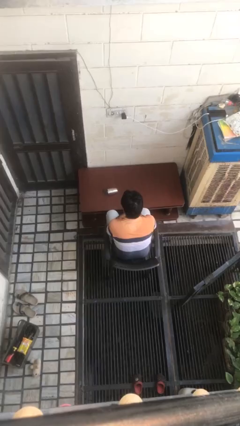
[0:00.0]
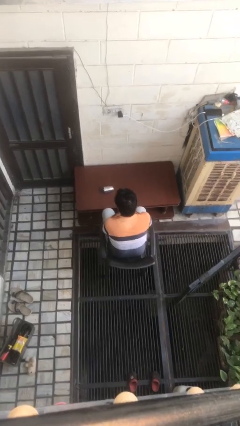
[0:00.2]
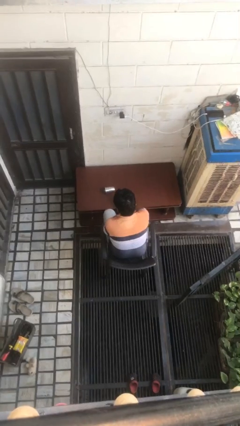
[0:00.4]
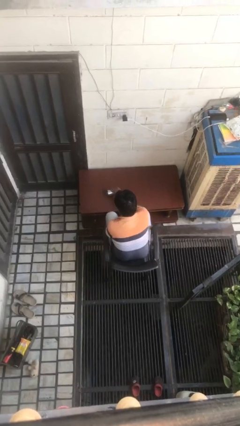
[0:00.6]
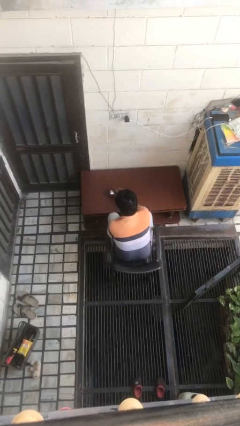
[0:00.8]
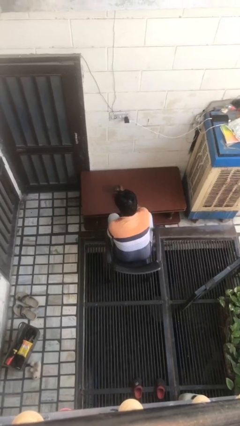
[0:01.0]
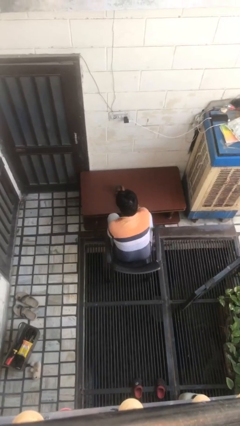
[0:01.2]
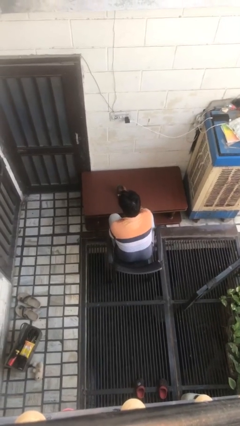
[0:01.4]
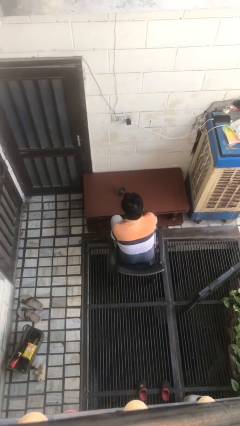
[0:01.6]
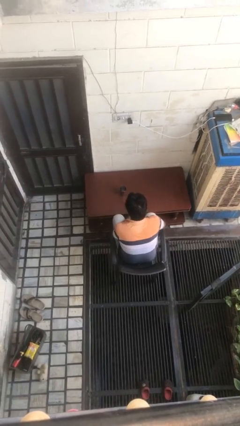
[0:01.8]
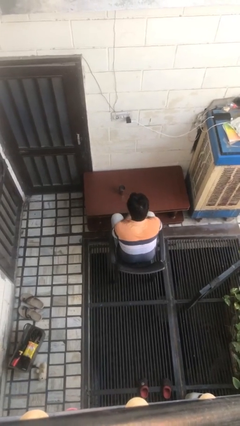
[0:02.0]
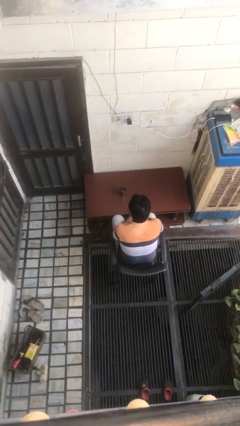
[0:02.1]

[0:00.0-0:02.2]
person sets upright glass

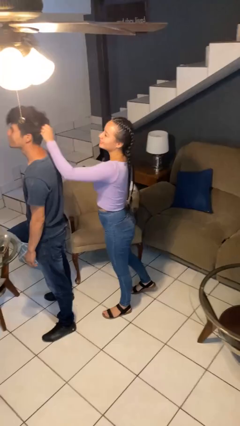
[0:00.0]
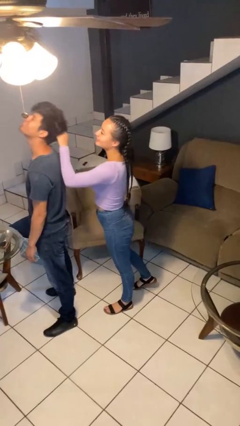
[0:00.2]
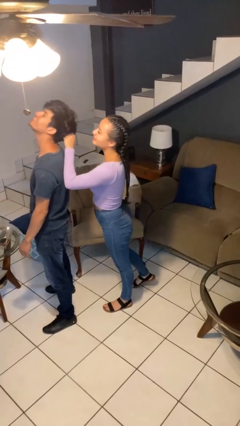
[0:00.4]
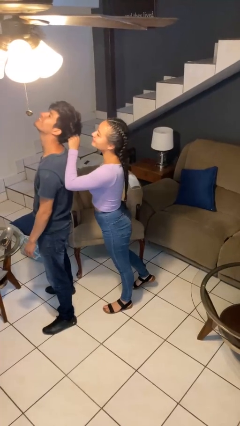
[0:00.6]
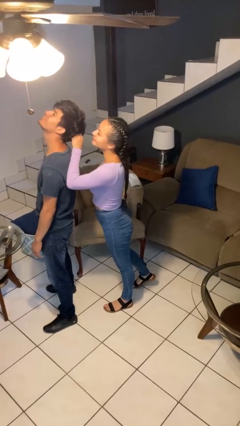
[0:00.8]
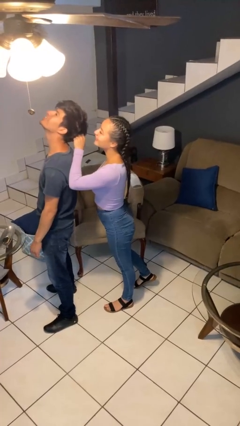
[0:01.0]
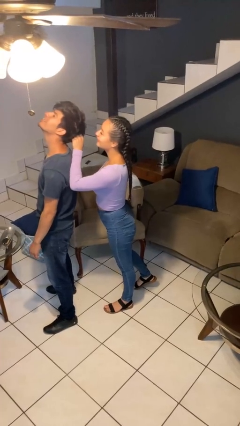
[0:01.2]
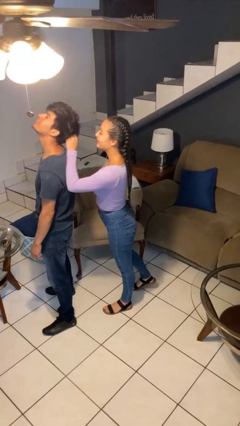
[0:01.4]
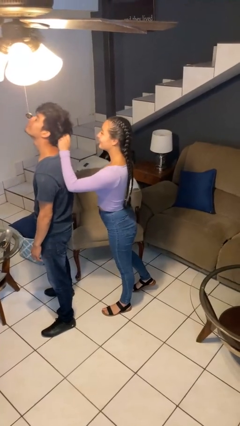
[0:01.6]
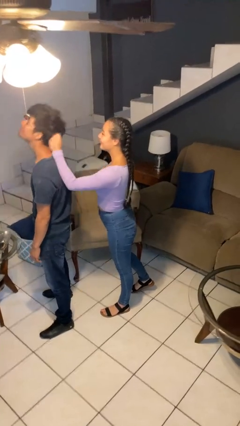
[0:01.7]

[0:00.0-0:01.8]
person grabs person by hair

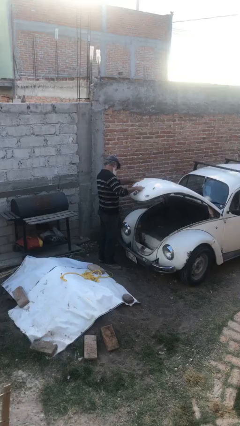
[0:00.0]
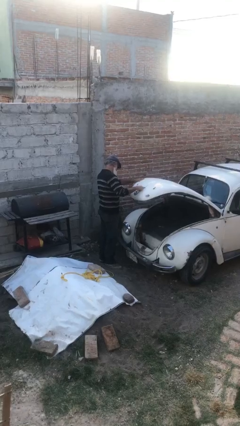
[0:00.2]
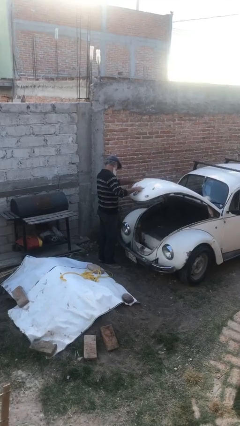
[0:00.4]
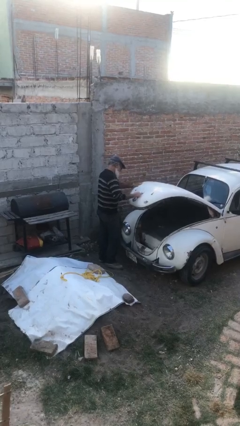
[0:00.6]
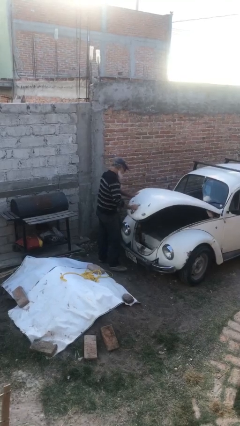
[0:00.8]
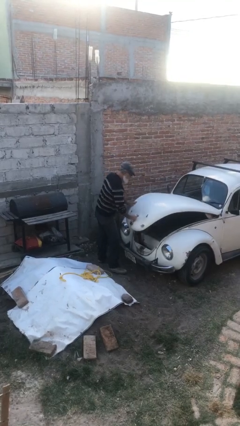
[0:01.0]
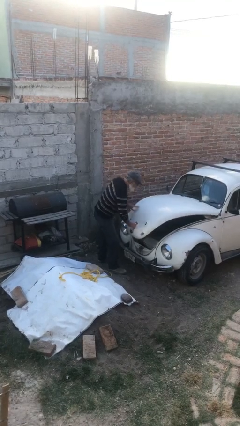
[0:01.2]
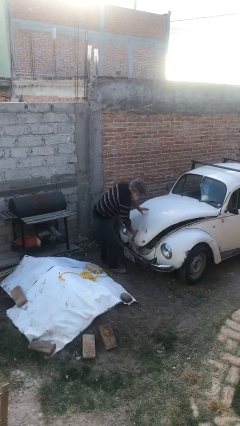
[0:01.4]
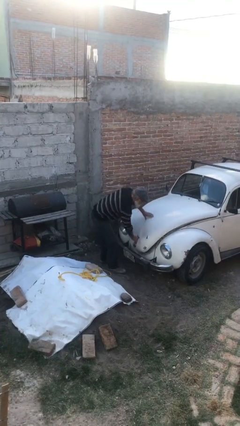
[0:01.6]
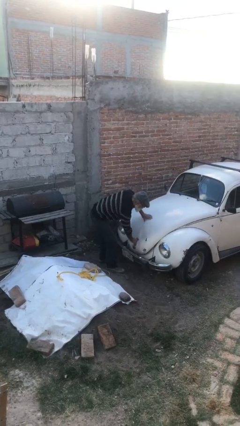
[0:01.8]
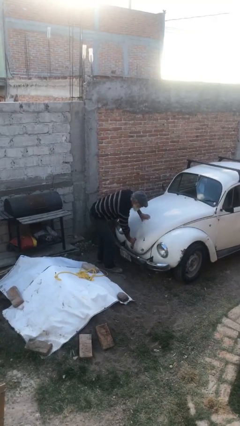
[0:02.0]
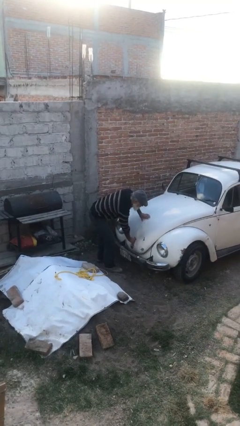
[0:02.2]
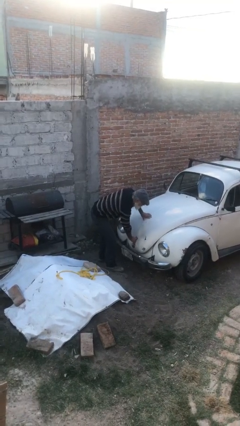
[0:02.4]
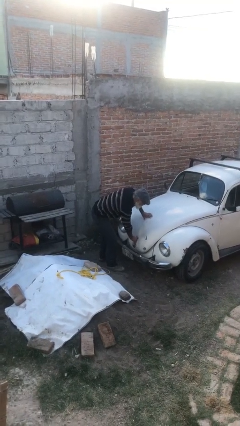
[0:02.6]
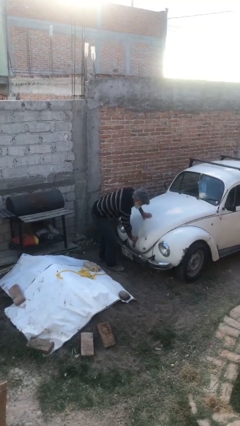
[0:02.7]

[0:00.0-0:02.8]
person closes car trunk

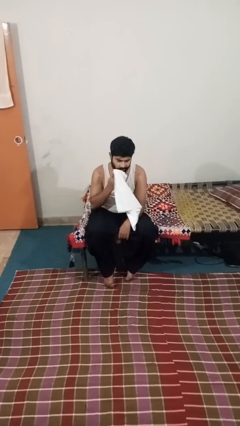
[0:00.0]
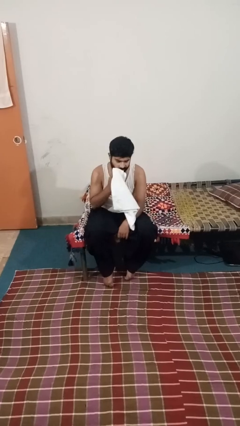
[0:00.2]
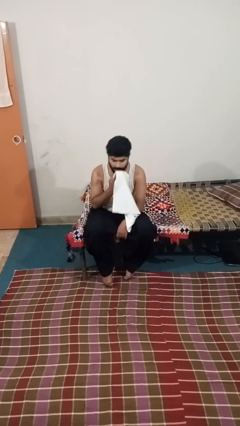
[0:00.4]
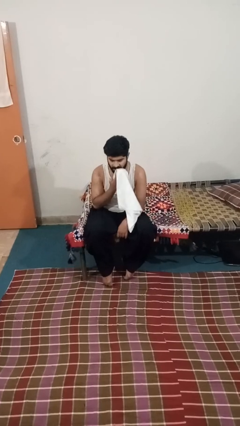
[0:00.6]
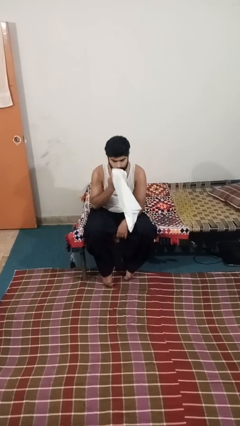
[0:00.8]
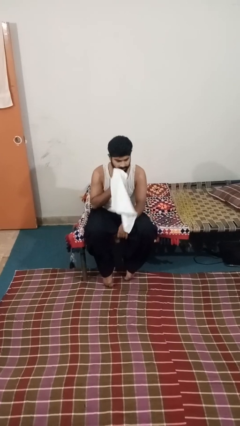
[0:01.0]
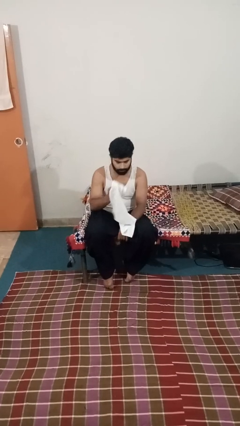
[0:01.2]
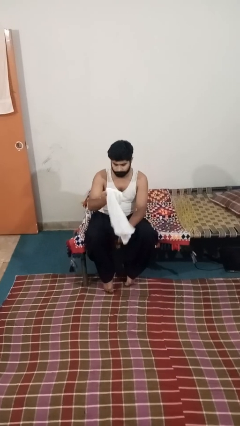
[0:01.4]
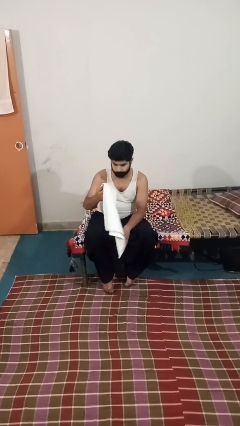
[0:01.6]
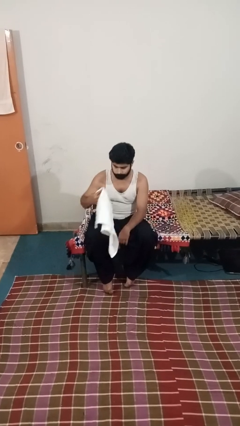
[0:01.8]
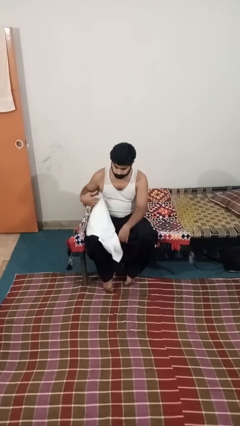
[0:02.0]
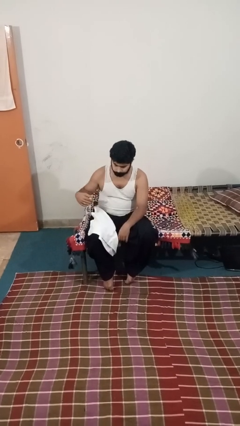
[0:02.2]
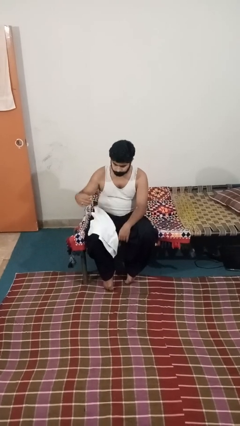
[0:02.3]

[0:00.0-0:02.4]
person wipes mouth with napkin

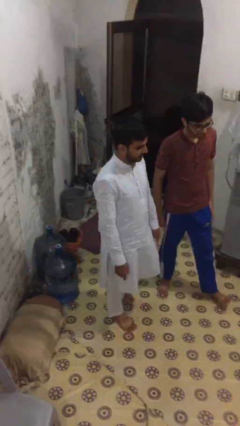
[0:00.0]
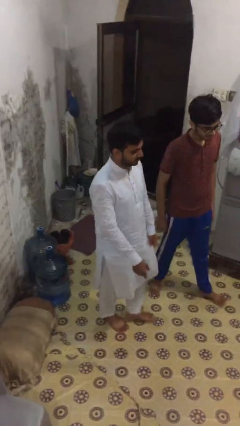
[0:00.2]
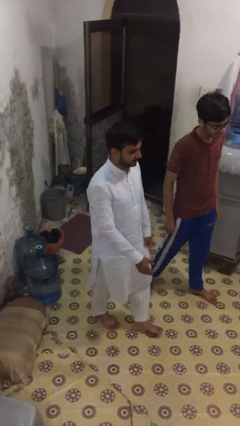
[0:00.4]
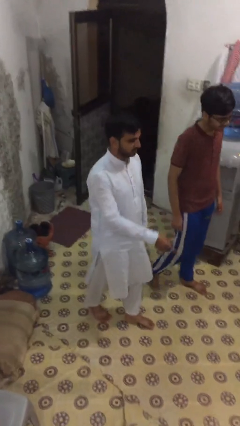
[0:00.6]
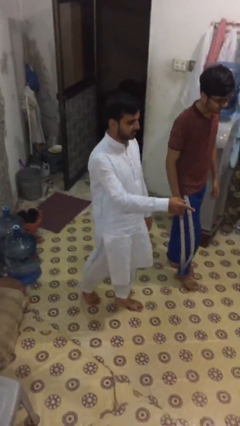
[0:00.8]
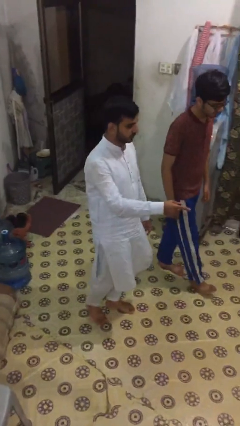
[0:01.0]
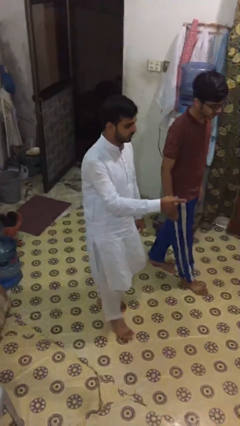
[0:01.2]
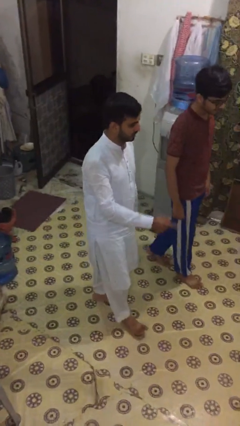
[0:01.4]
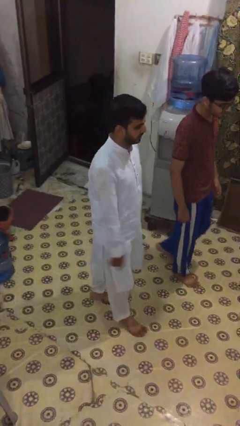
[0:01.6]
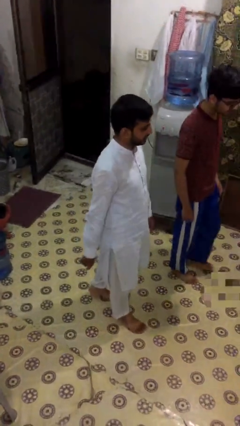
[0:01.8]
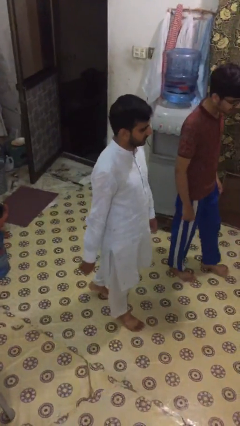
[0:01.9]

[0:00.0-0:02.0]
person talks to person

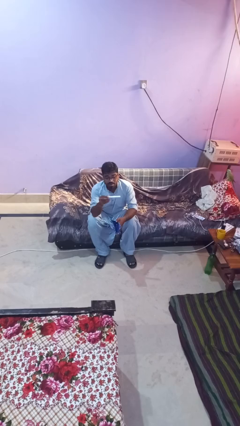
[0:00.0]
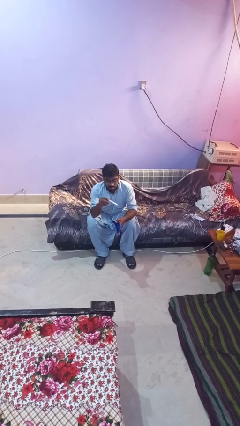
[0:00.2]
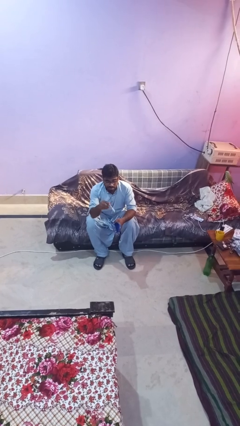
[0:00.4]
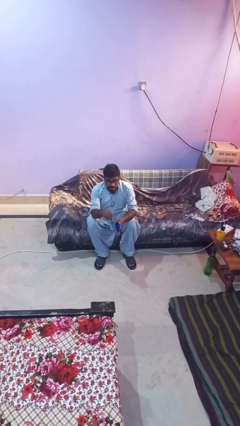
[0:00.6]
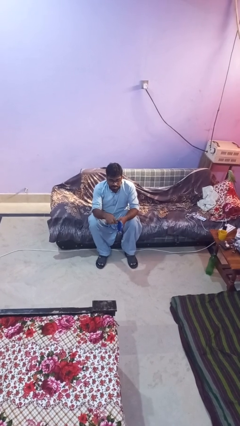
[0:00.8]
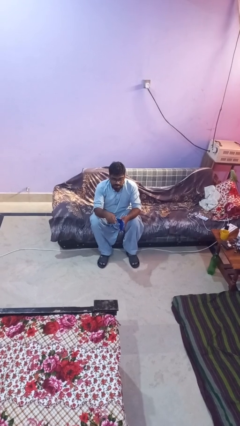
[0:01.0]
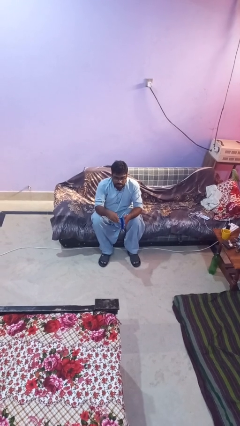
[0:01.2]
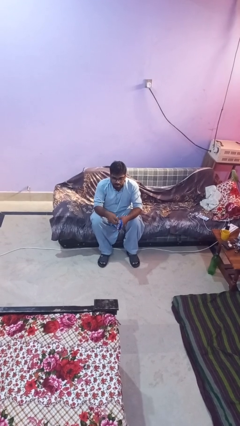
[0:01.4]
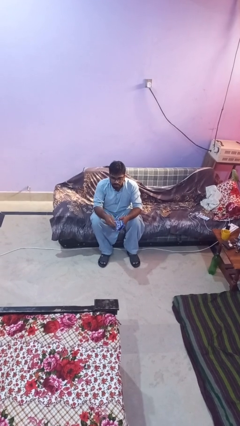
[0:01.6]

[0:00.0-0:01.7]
person puts object into purse

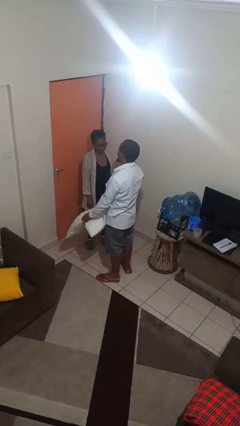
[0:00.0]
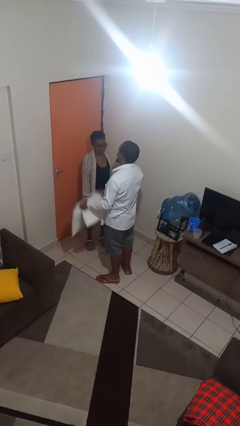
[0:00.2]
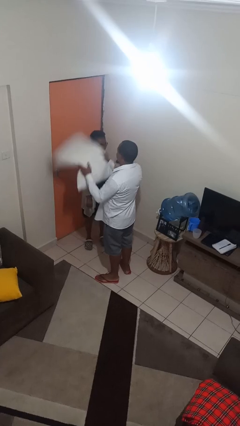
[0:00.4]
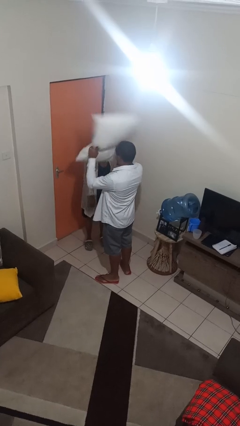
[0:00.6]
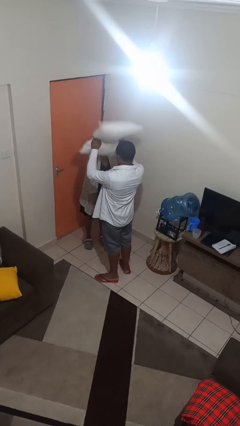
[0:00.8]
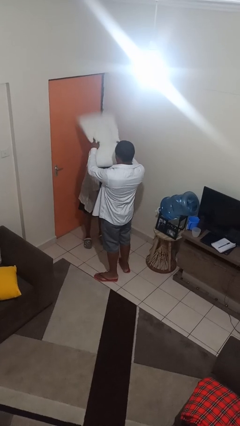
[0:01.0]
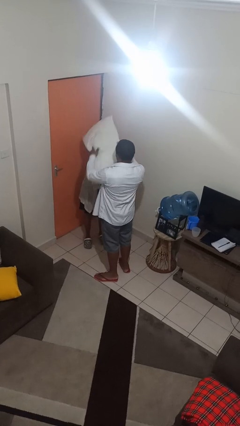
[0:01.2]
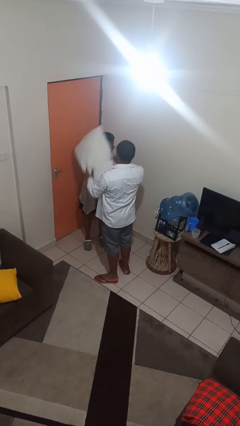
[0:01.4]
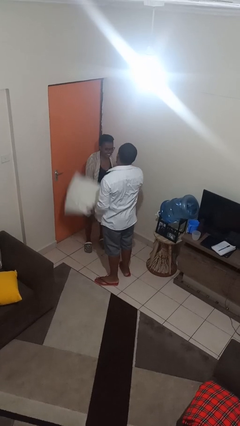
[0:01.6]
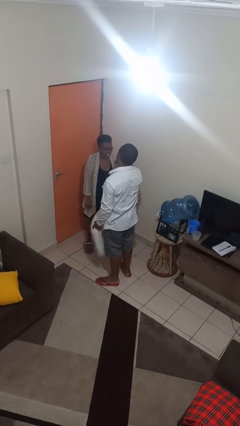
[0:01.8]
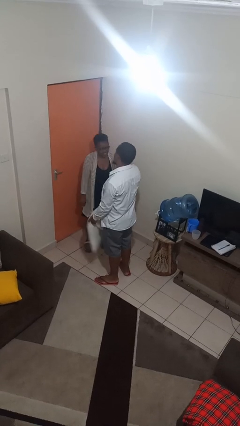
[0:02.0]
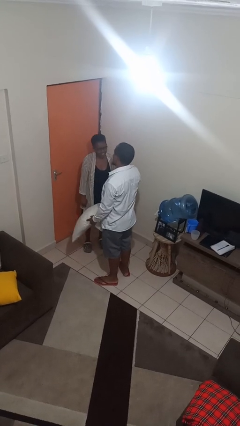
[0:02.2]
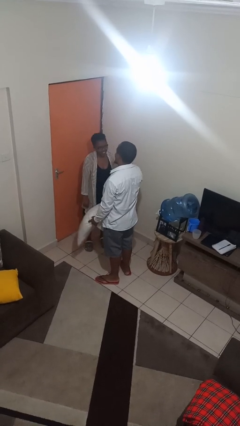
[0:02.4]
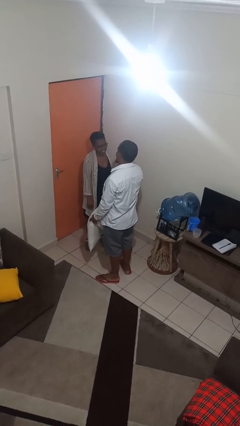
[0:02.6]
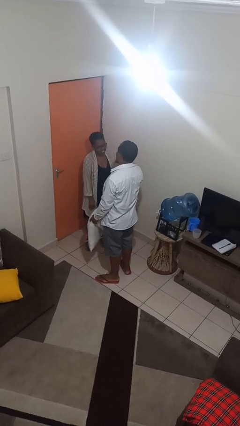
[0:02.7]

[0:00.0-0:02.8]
person hits person with pillow

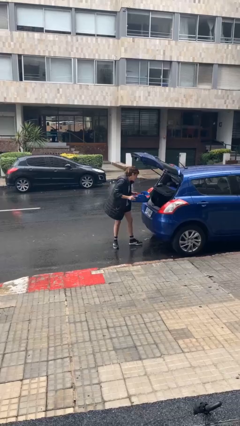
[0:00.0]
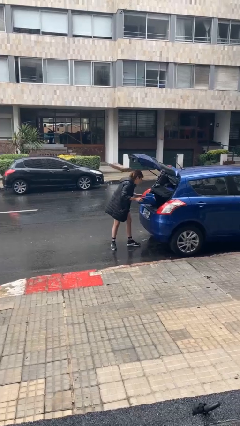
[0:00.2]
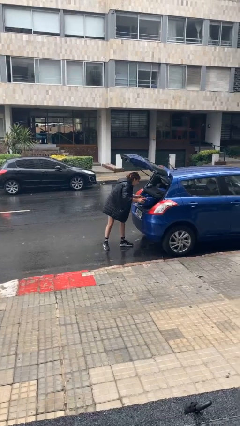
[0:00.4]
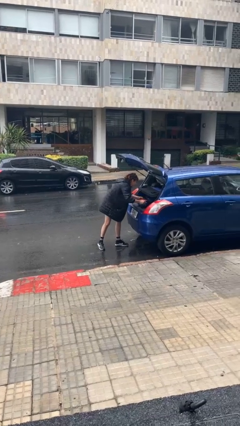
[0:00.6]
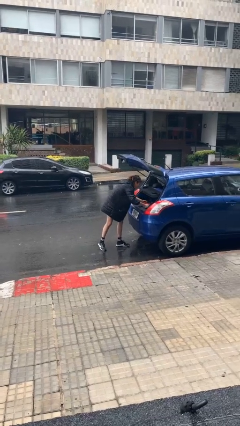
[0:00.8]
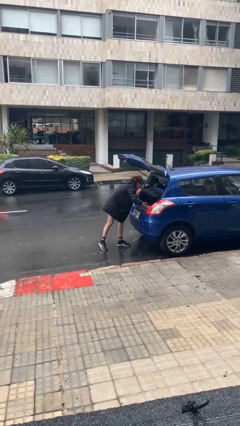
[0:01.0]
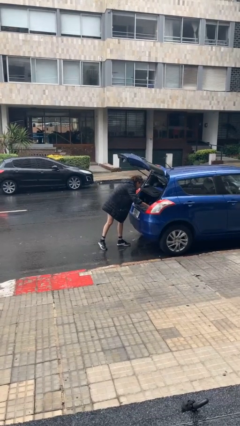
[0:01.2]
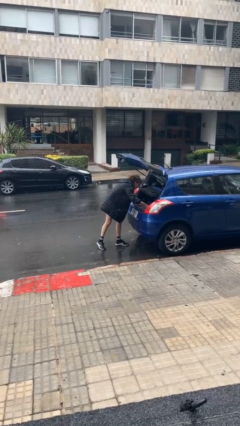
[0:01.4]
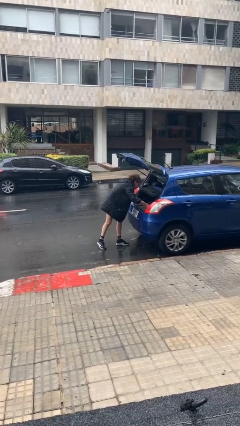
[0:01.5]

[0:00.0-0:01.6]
person loads car
